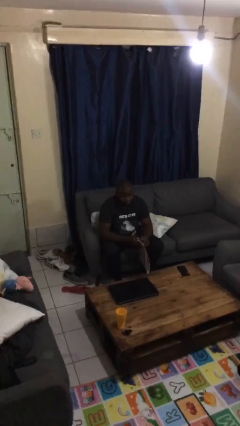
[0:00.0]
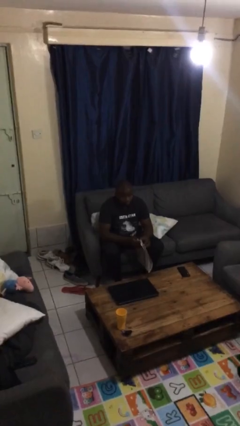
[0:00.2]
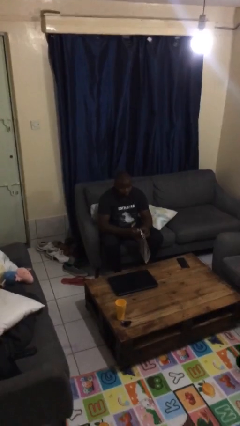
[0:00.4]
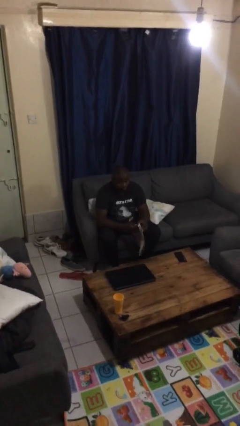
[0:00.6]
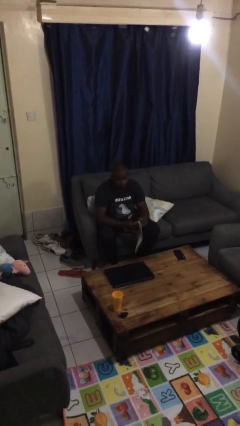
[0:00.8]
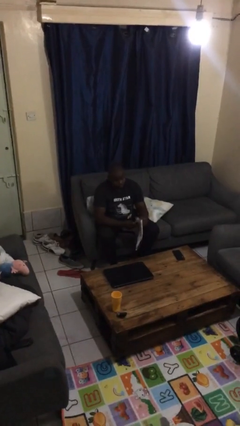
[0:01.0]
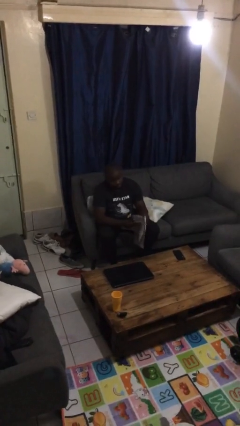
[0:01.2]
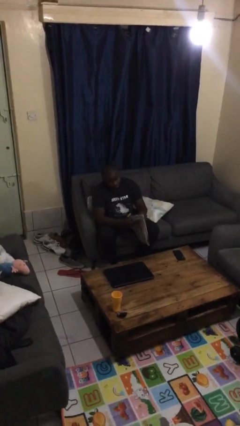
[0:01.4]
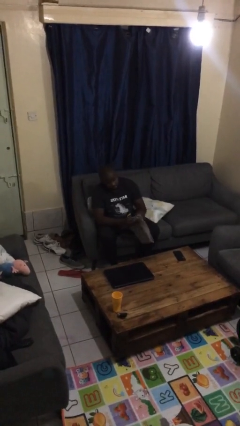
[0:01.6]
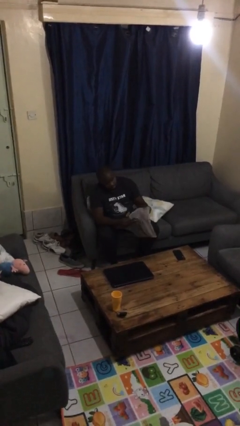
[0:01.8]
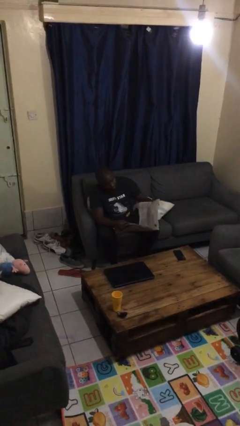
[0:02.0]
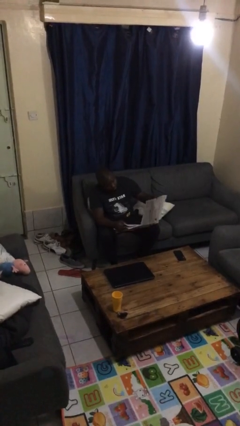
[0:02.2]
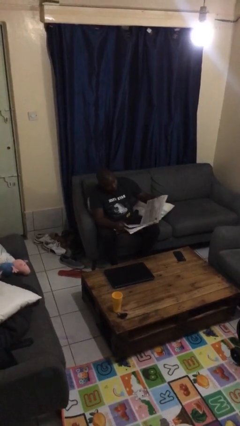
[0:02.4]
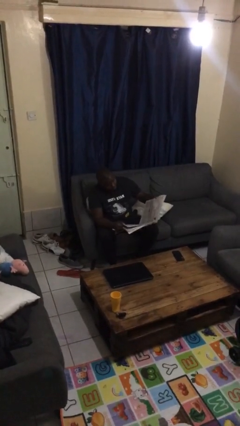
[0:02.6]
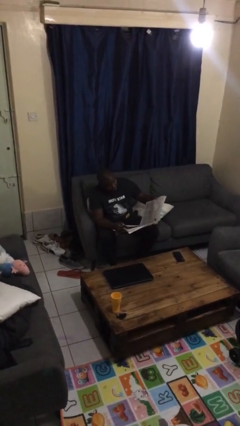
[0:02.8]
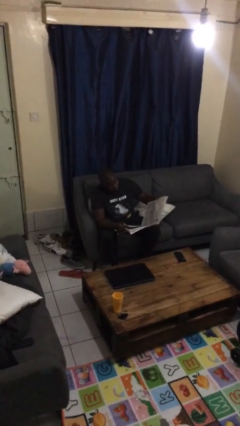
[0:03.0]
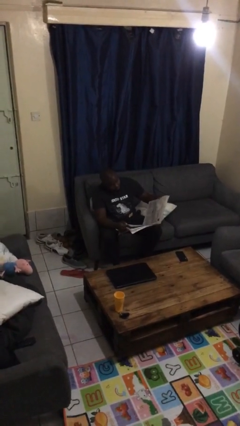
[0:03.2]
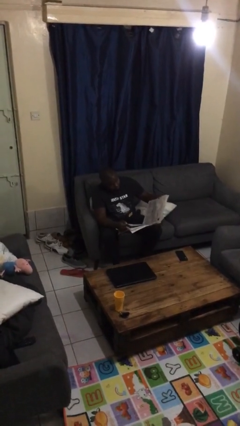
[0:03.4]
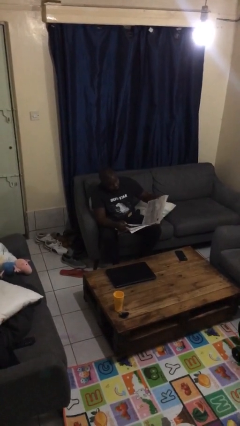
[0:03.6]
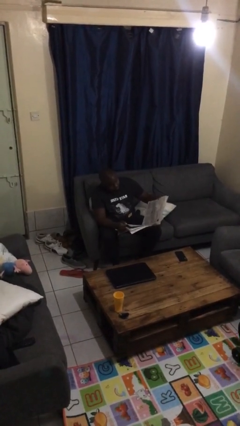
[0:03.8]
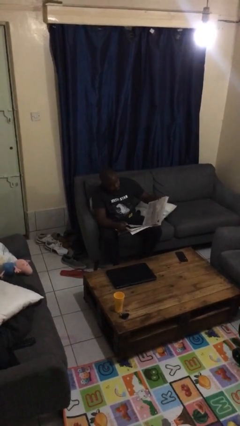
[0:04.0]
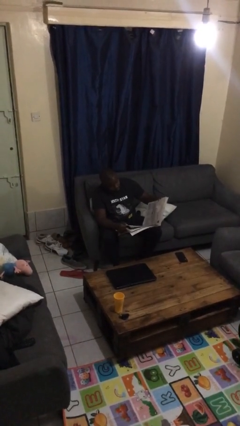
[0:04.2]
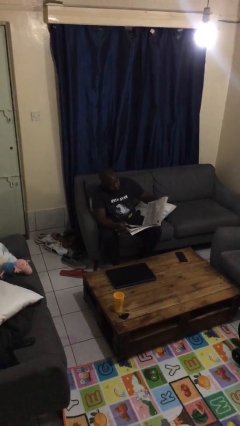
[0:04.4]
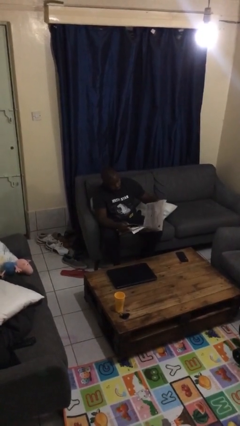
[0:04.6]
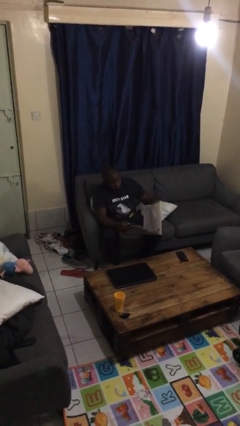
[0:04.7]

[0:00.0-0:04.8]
person reads newspaper

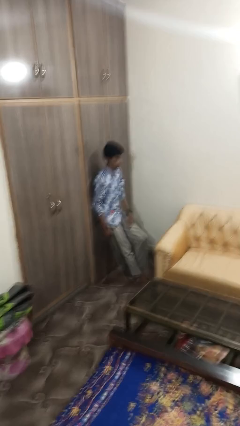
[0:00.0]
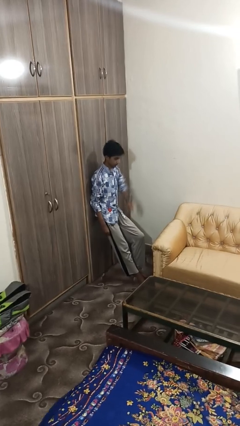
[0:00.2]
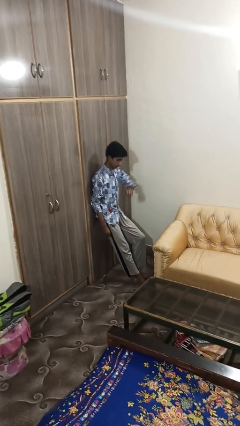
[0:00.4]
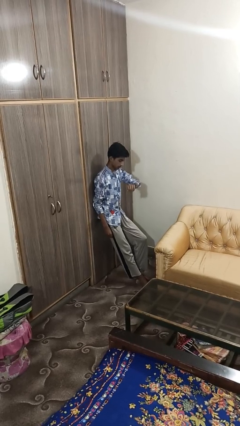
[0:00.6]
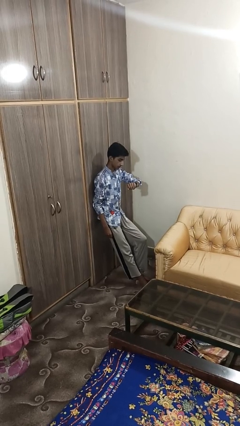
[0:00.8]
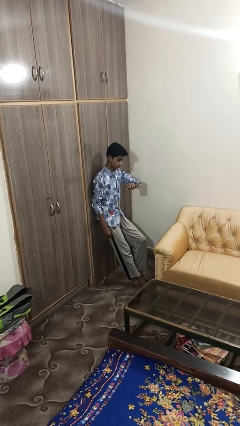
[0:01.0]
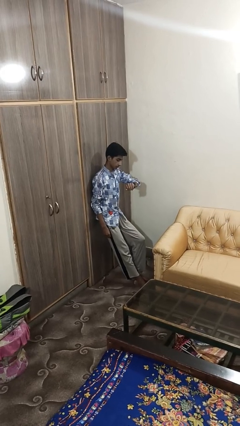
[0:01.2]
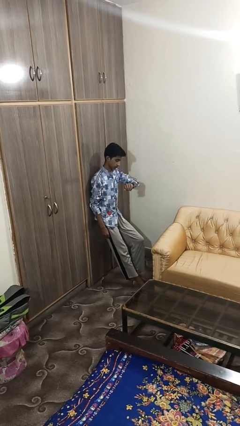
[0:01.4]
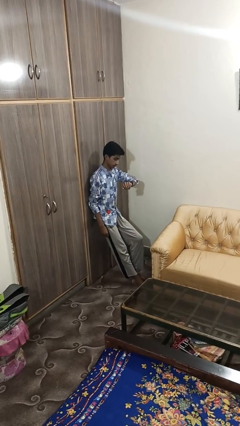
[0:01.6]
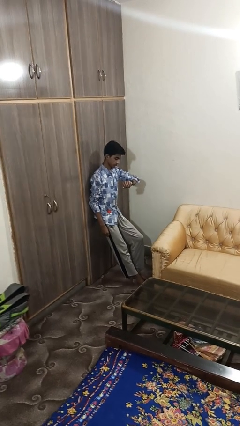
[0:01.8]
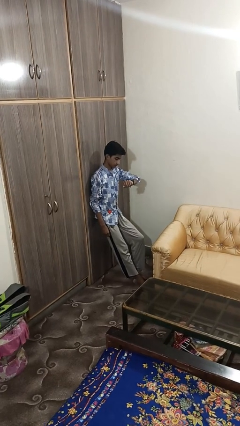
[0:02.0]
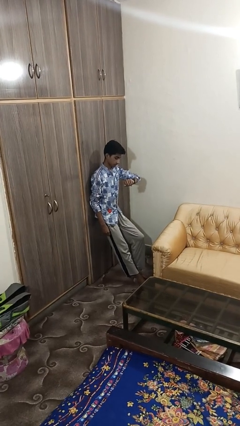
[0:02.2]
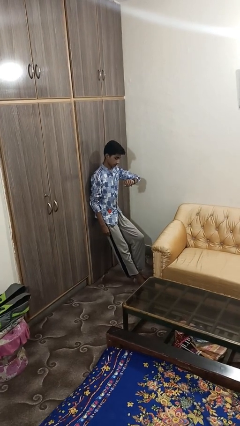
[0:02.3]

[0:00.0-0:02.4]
person looks at wristwatch

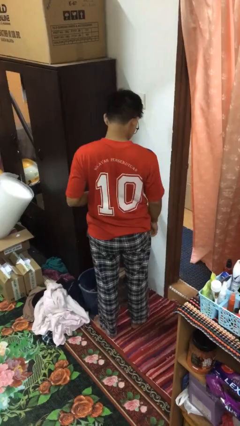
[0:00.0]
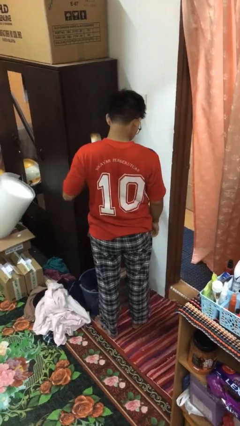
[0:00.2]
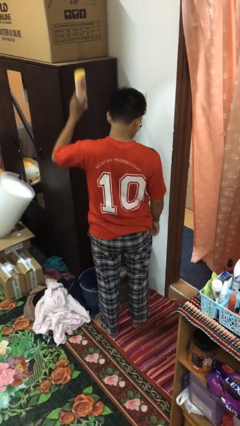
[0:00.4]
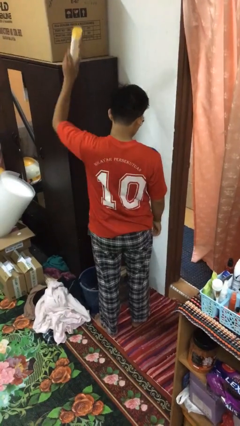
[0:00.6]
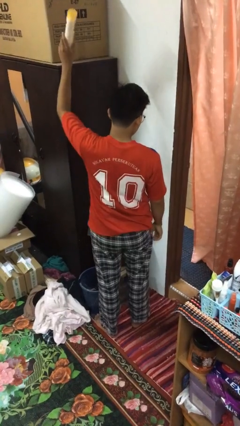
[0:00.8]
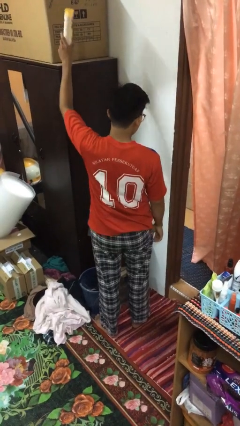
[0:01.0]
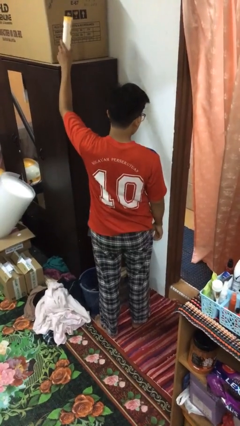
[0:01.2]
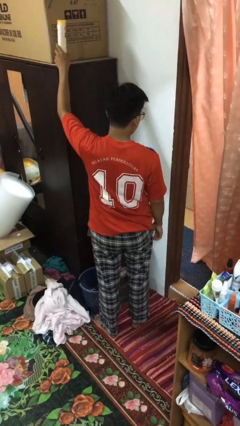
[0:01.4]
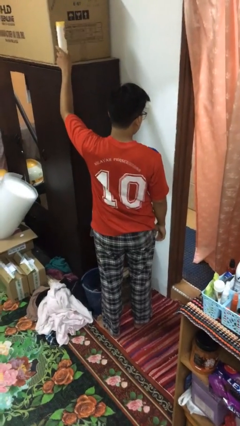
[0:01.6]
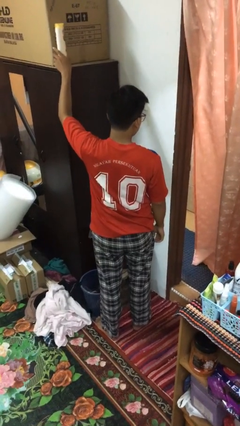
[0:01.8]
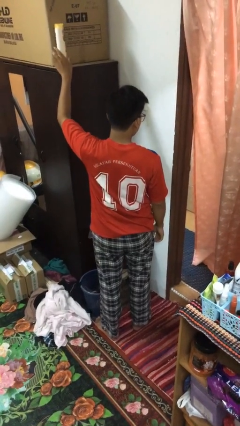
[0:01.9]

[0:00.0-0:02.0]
person puts down object on shelf

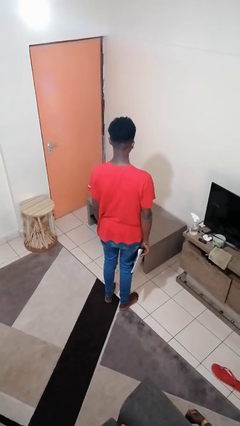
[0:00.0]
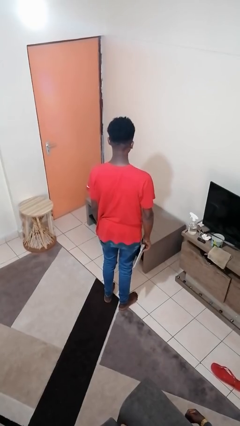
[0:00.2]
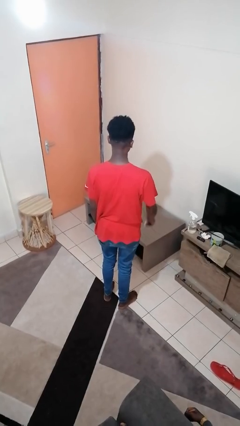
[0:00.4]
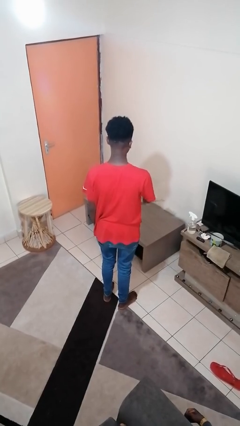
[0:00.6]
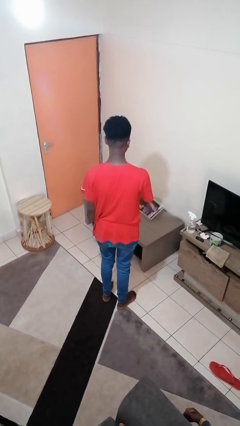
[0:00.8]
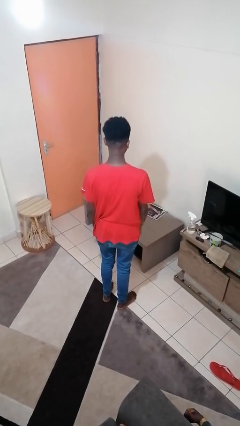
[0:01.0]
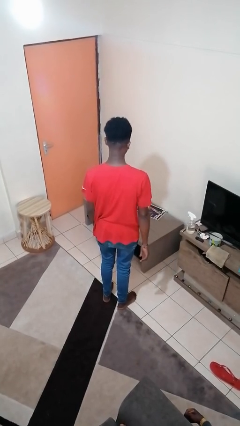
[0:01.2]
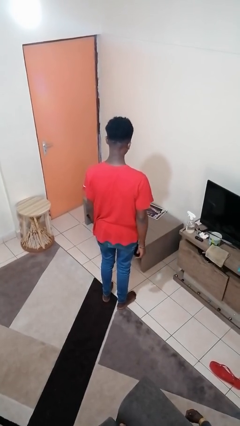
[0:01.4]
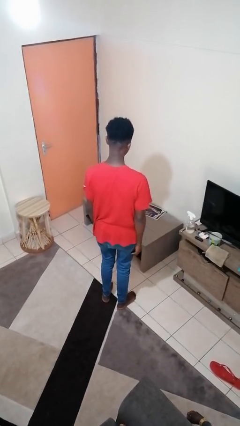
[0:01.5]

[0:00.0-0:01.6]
person throws object on table

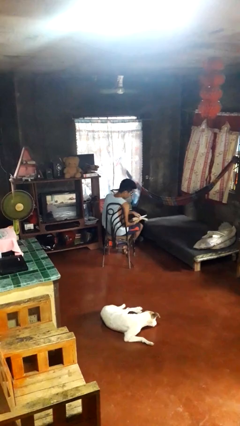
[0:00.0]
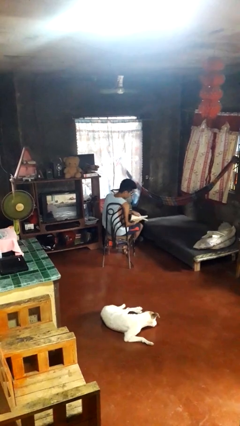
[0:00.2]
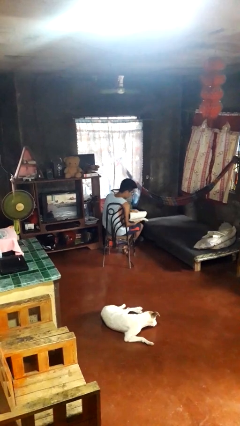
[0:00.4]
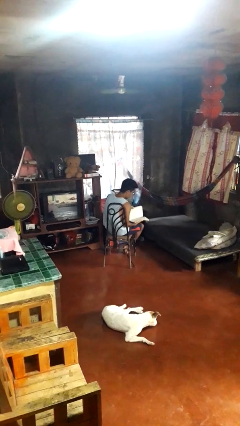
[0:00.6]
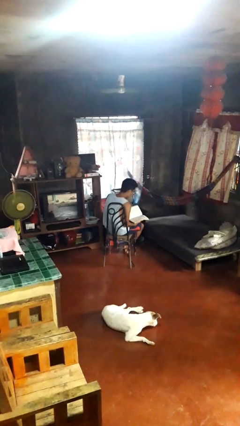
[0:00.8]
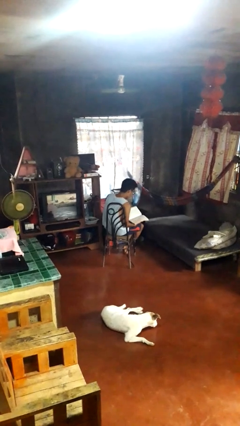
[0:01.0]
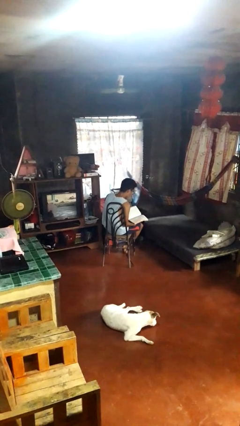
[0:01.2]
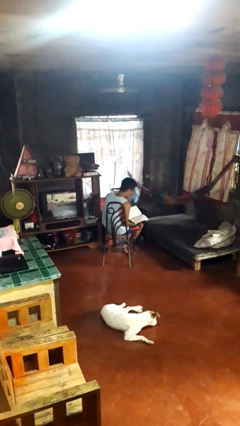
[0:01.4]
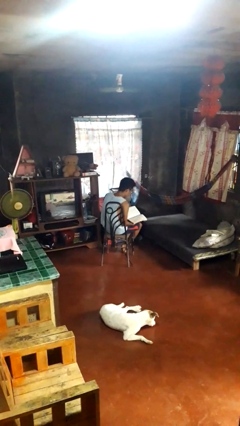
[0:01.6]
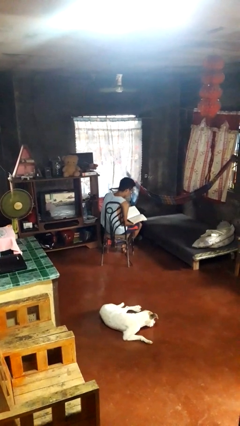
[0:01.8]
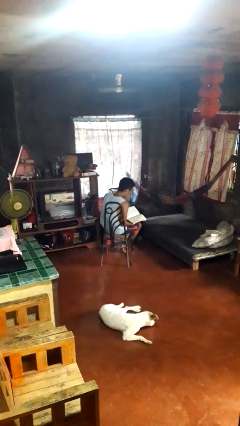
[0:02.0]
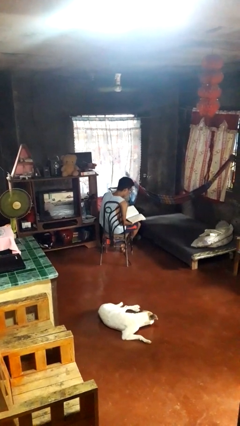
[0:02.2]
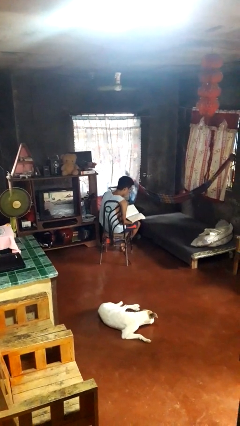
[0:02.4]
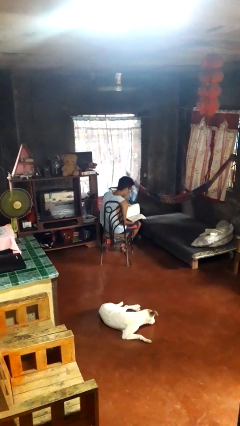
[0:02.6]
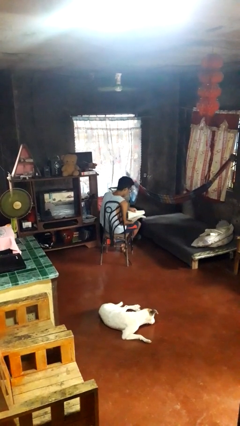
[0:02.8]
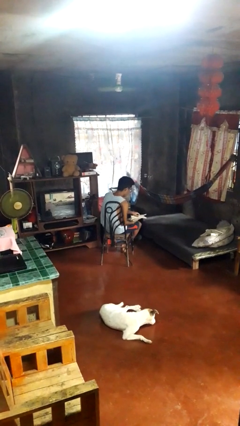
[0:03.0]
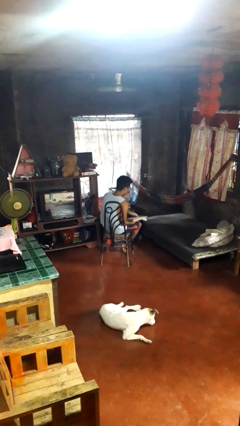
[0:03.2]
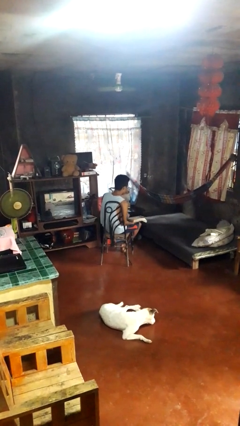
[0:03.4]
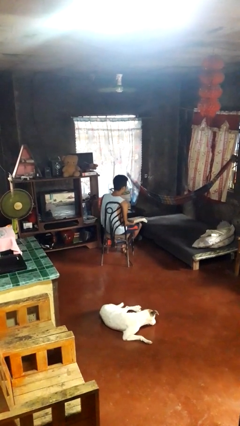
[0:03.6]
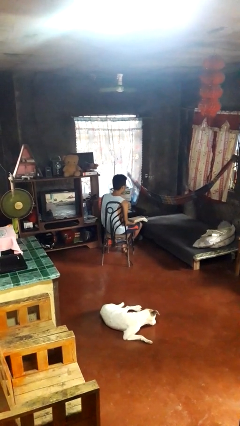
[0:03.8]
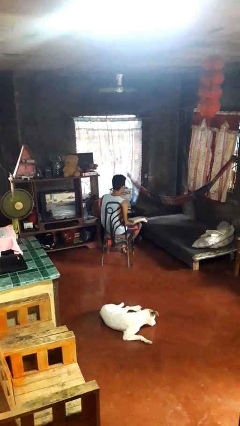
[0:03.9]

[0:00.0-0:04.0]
person reads book

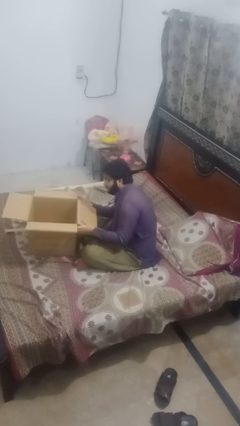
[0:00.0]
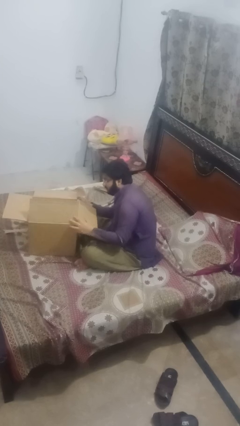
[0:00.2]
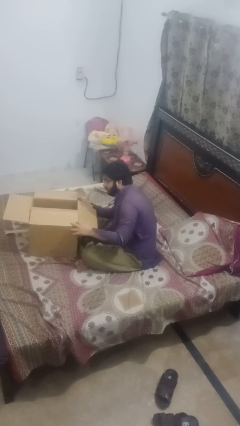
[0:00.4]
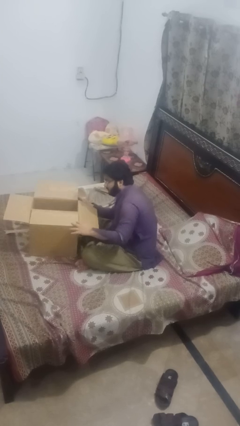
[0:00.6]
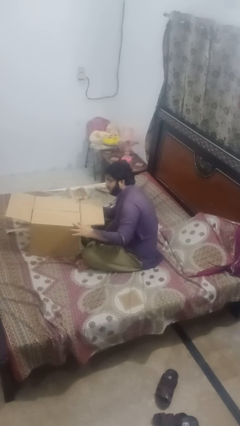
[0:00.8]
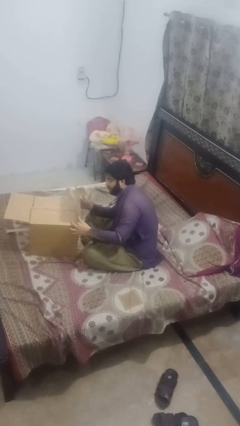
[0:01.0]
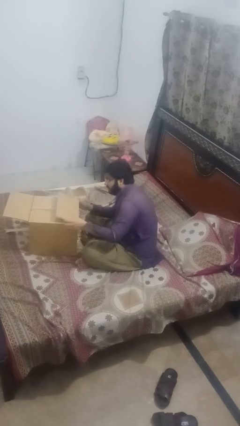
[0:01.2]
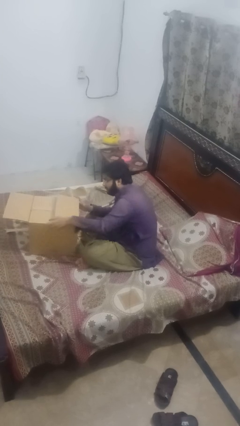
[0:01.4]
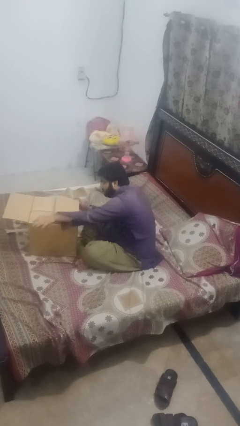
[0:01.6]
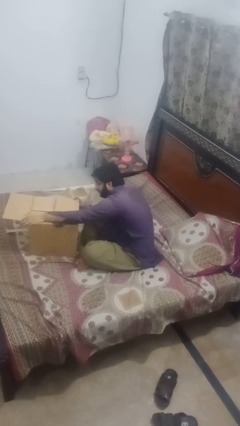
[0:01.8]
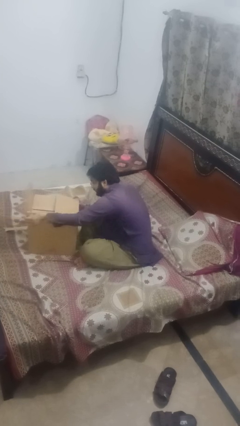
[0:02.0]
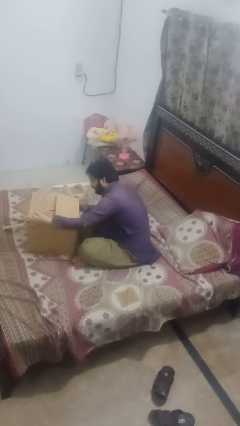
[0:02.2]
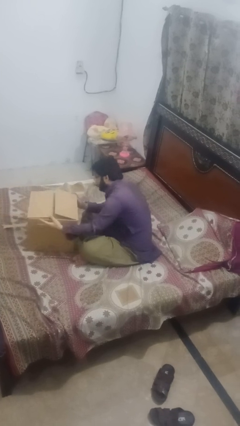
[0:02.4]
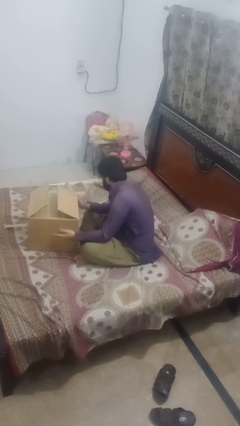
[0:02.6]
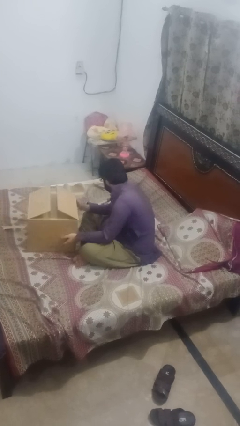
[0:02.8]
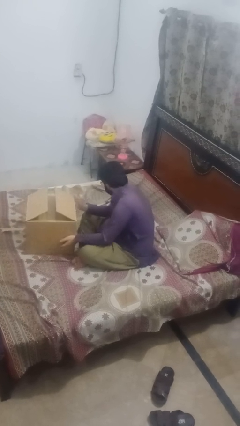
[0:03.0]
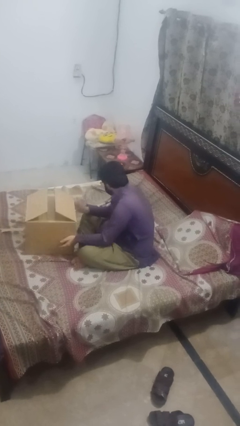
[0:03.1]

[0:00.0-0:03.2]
person closes box
